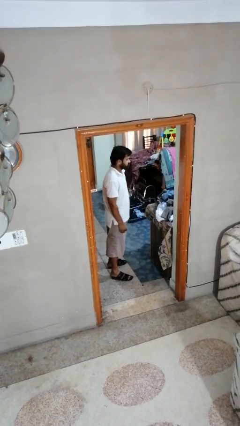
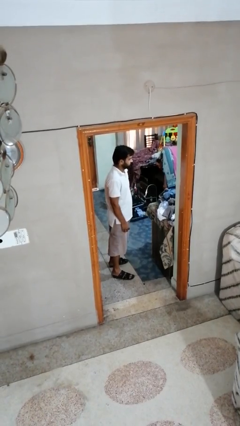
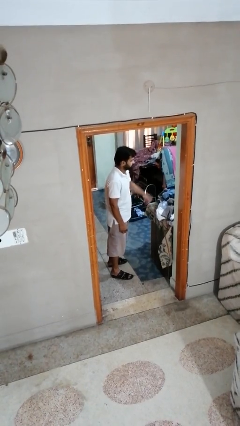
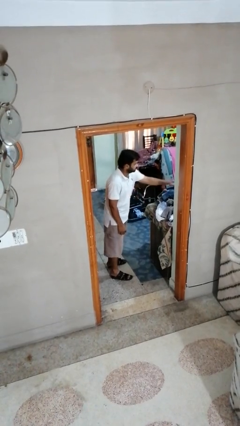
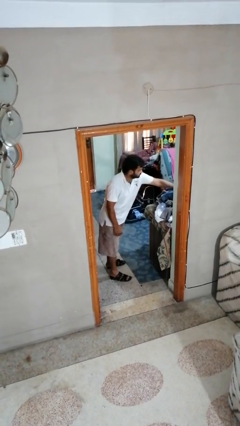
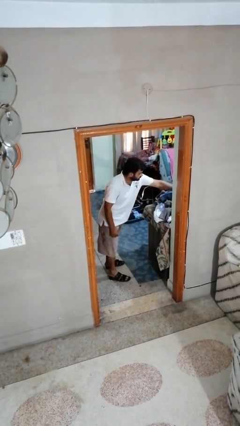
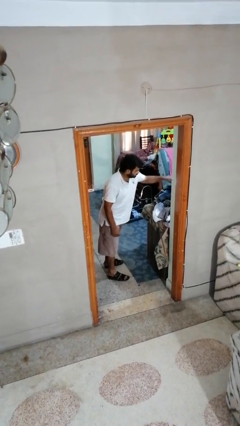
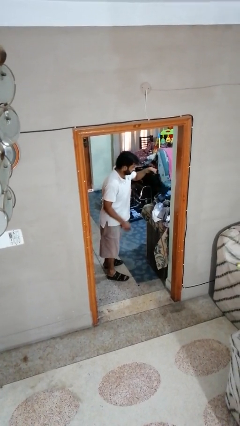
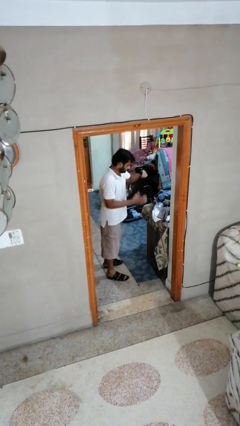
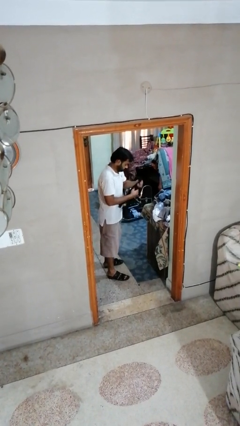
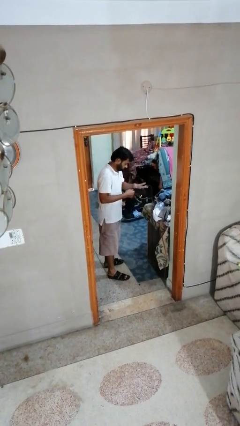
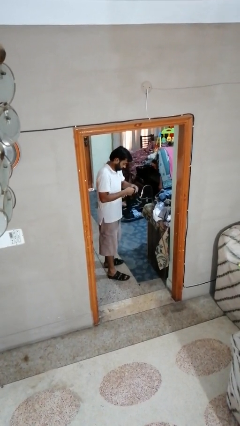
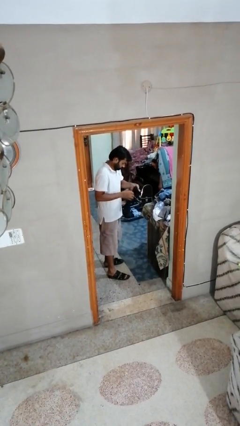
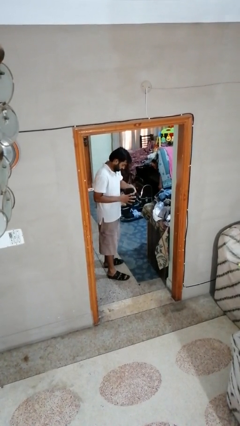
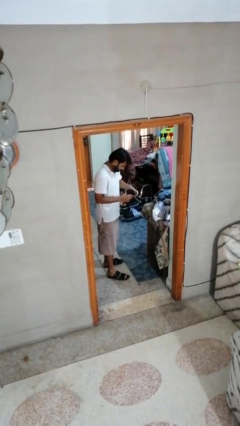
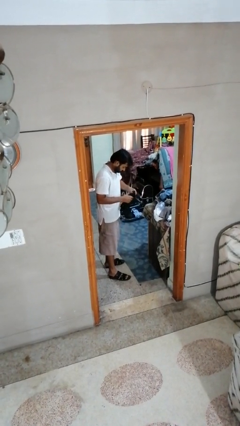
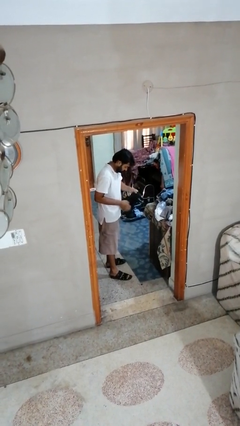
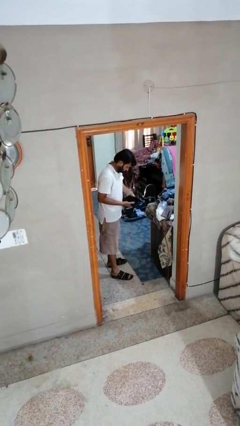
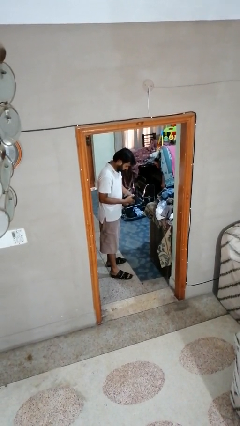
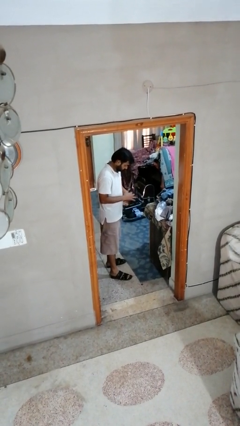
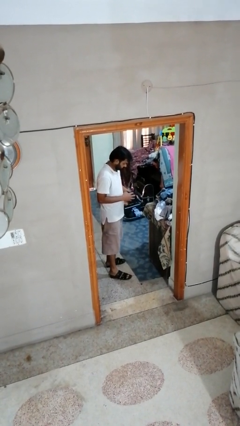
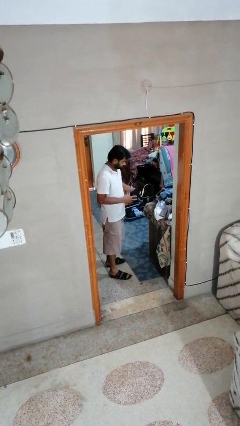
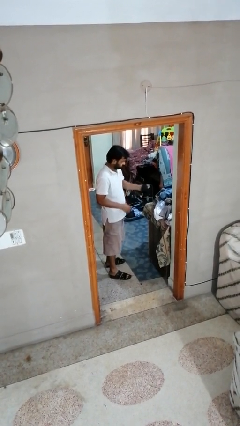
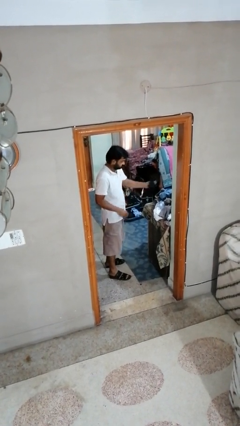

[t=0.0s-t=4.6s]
person folds socks

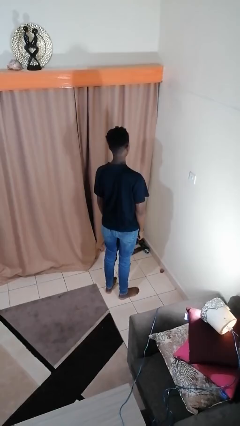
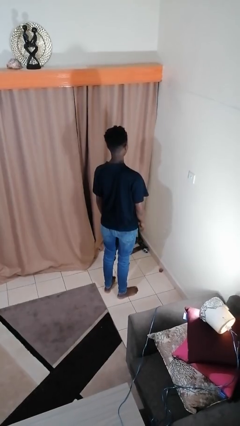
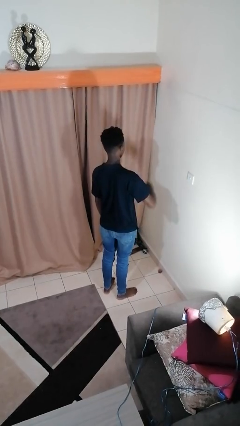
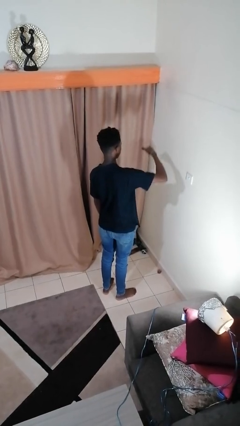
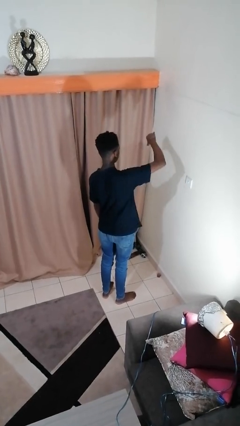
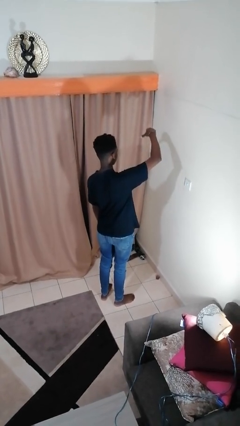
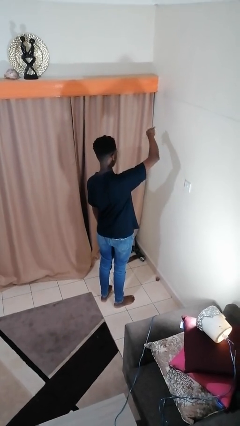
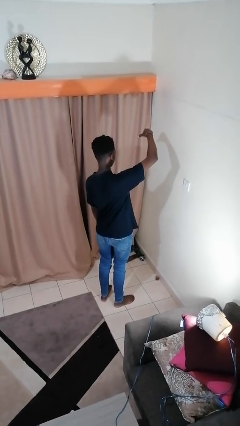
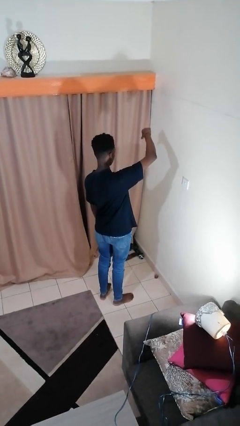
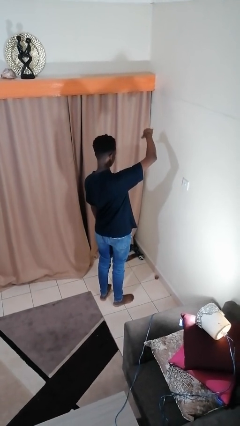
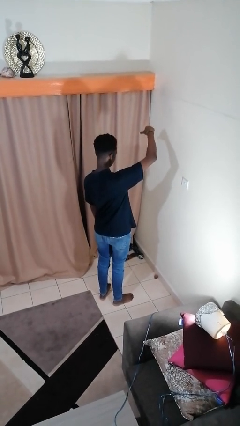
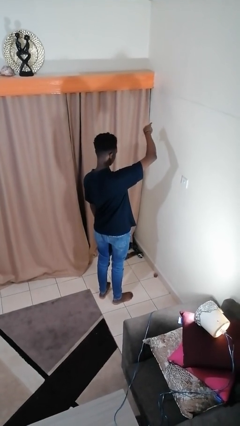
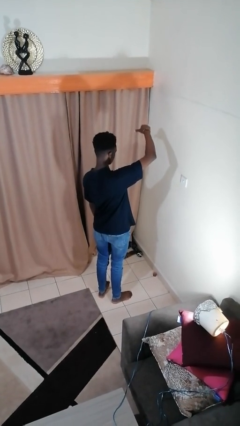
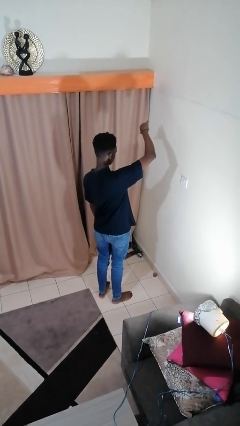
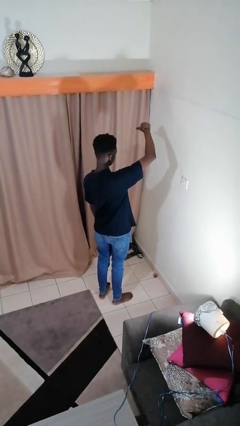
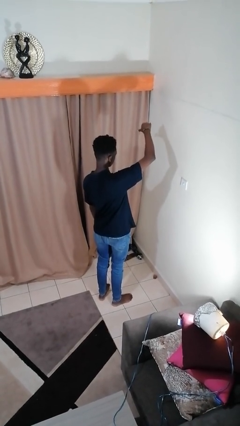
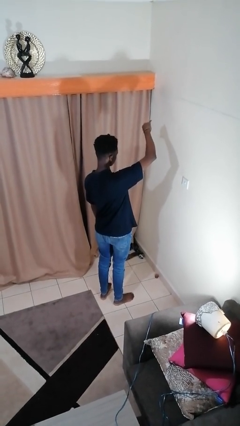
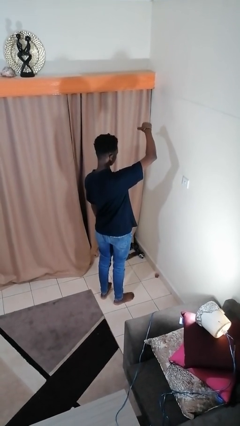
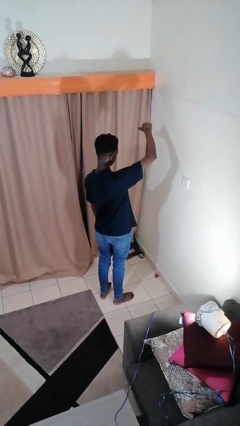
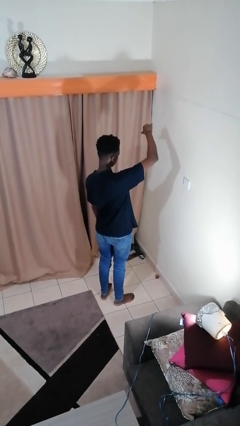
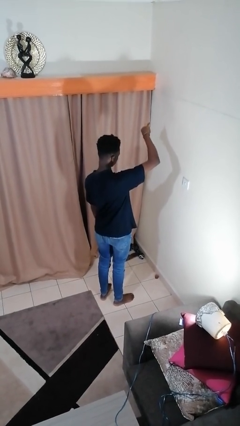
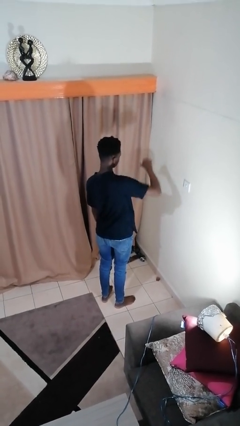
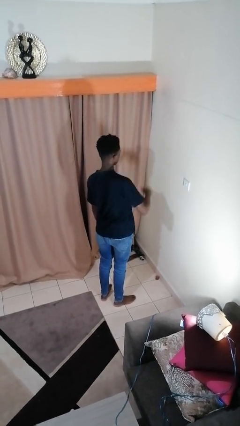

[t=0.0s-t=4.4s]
person gestures hang loose

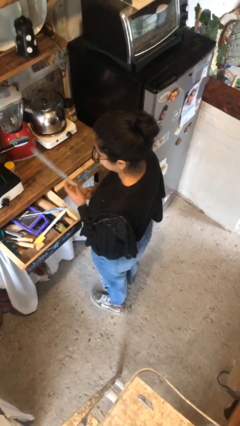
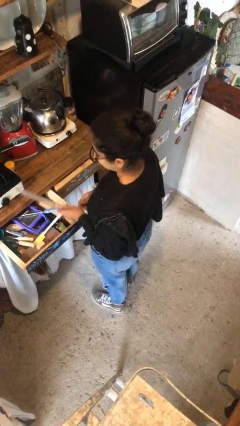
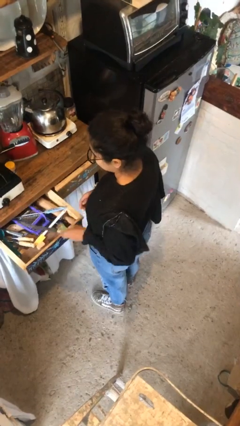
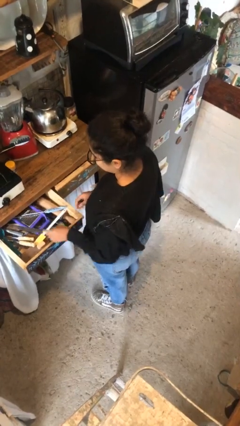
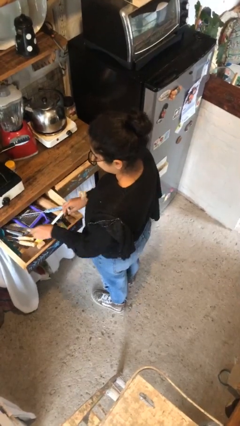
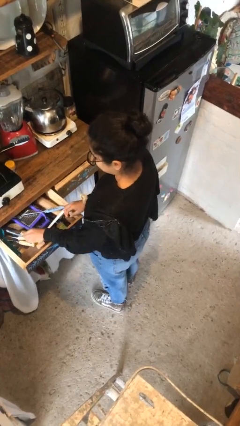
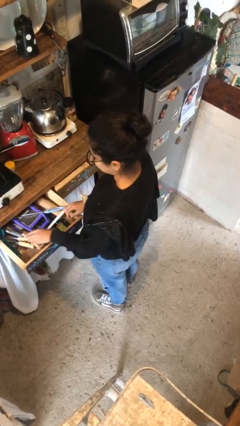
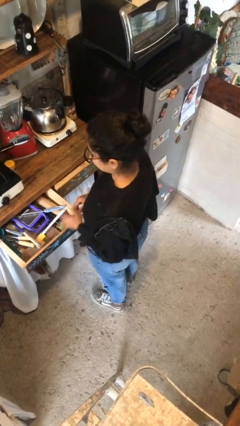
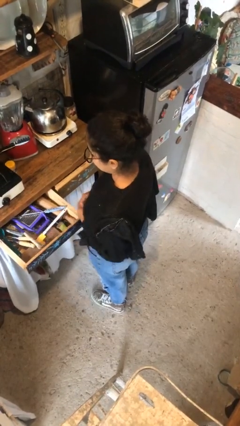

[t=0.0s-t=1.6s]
person puts object into kitchen drawer

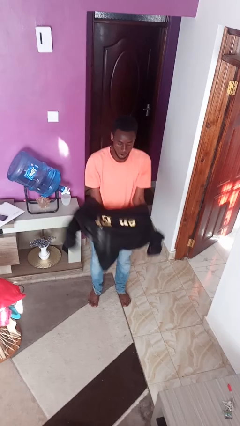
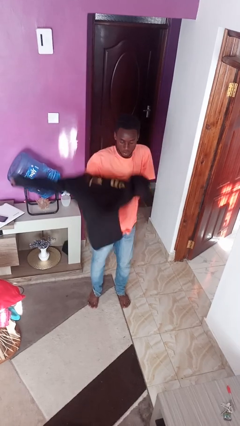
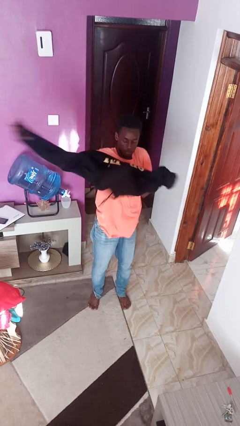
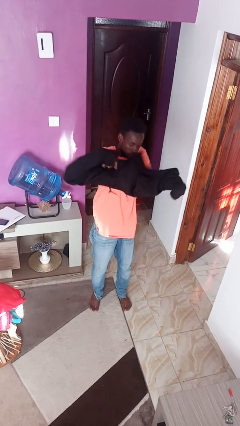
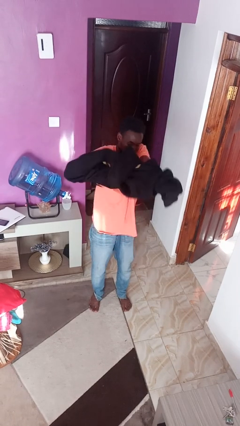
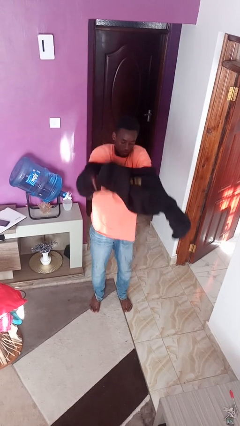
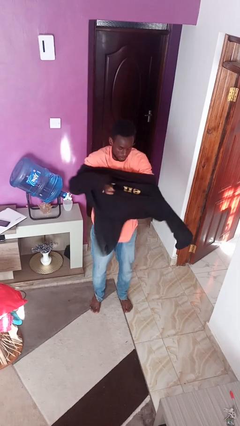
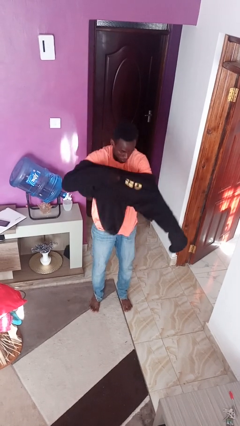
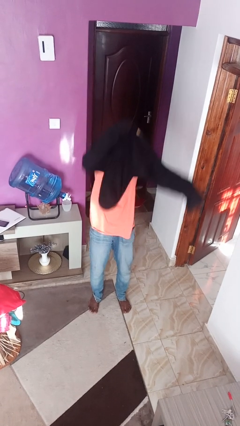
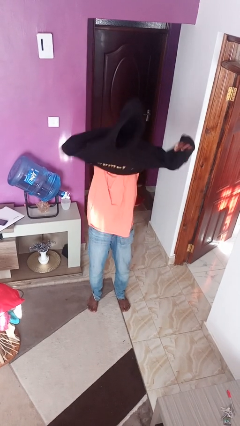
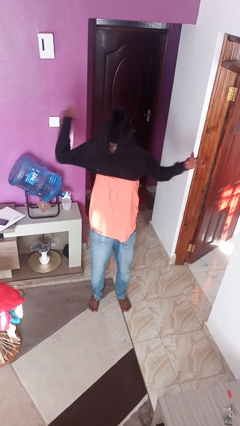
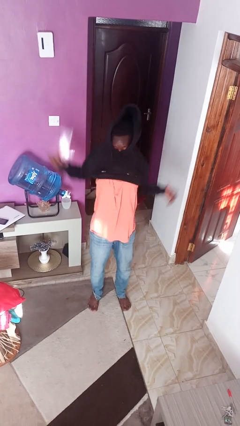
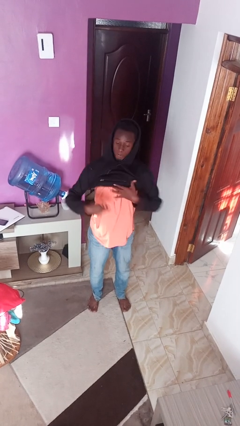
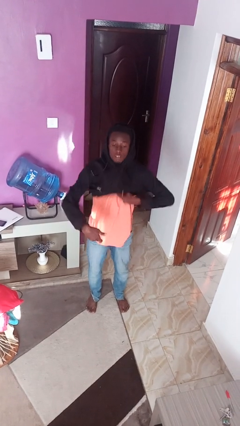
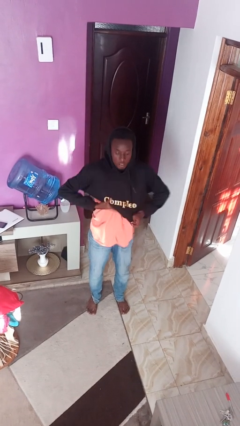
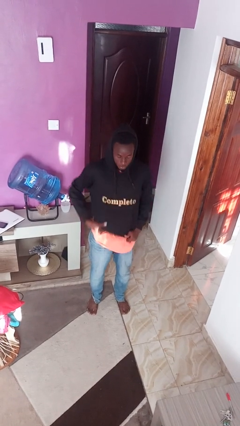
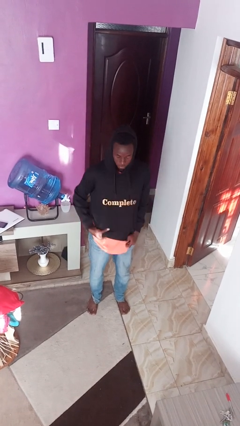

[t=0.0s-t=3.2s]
person shoves person

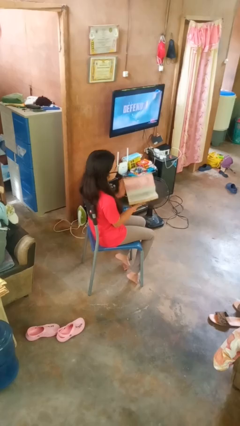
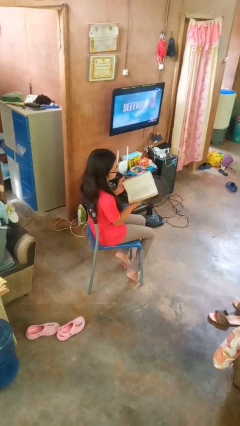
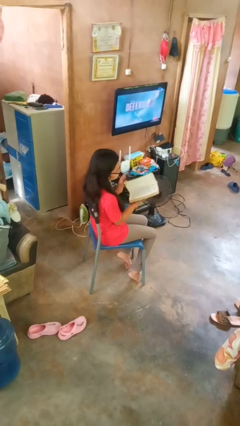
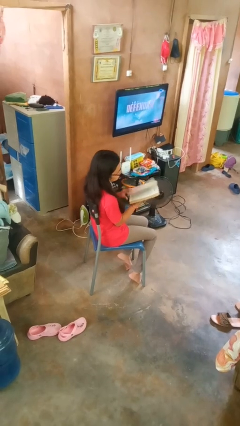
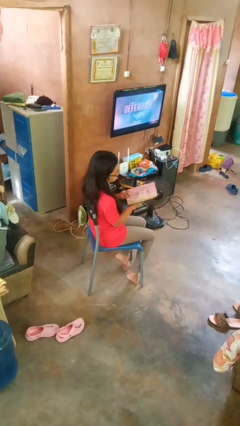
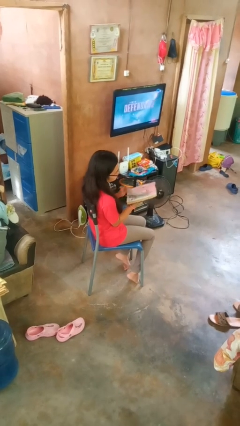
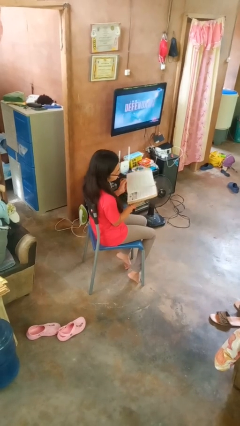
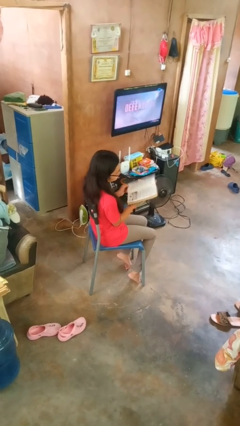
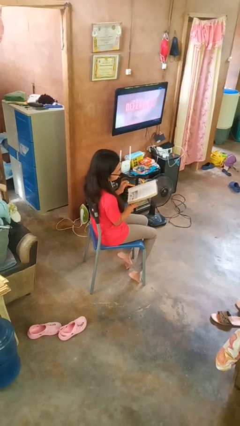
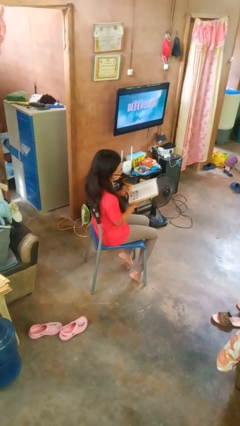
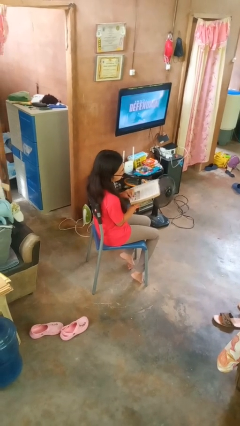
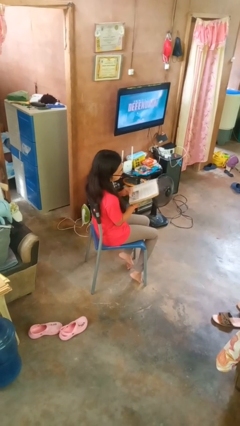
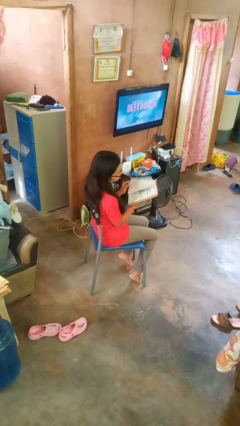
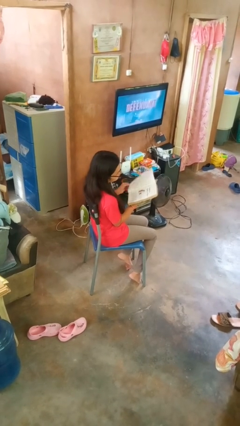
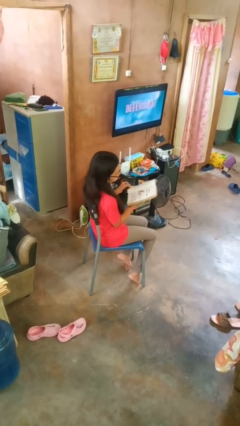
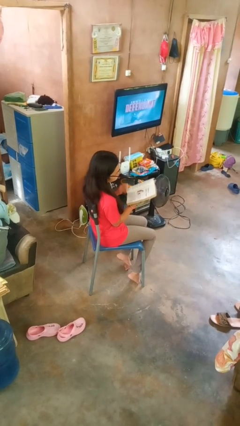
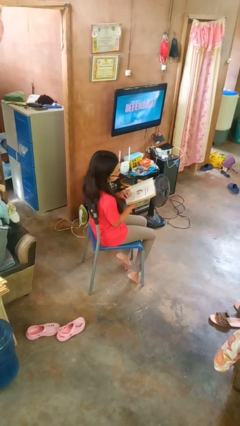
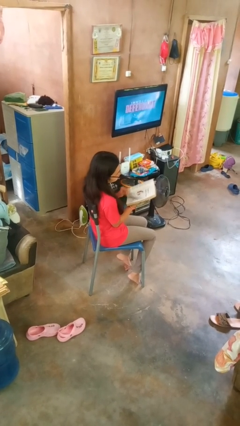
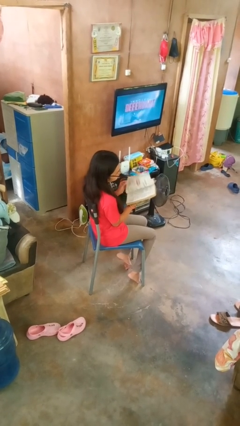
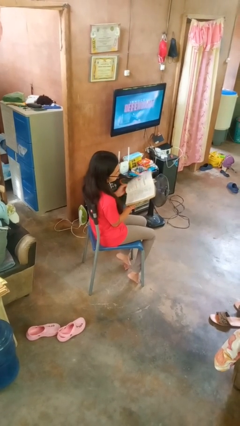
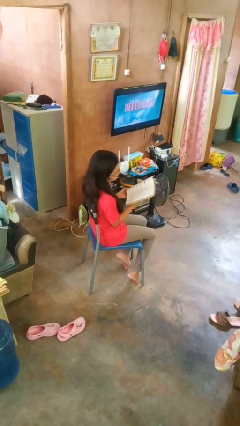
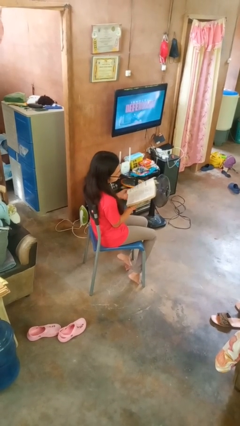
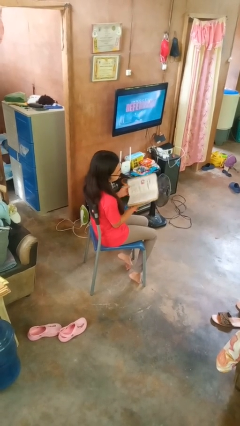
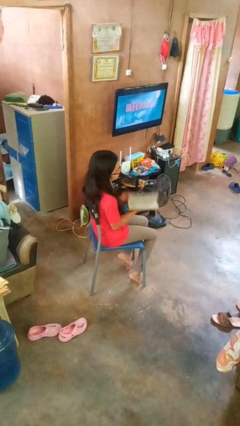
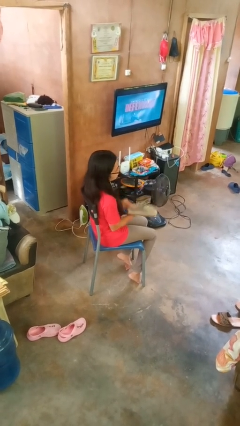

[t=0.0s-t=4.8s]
person reads book
